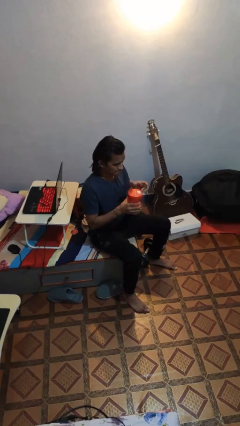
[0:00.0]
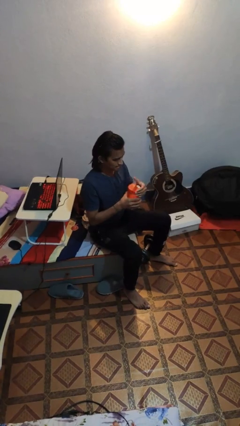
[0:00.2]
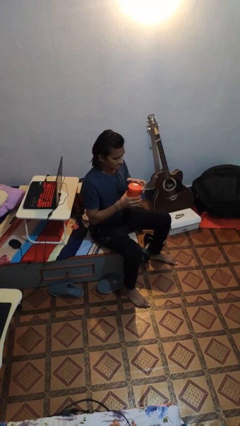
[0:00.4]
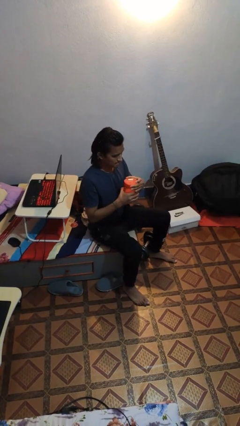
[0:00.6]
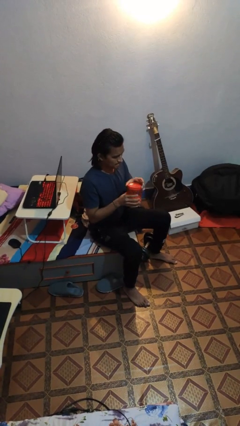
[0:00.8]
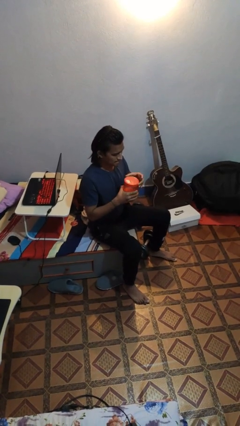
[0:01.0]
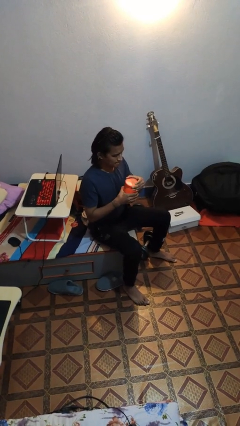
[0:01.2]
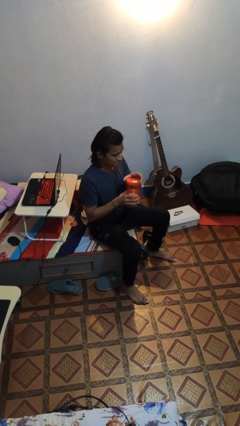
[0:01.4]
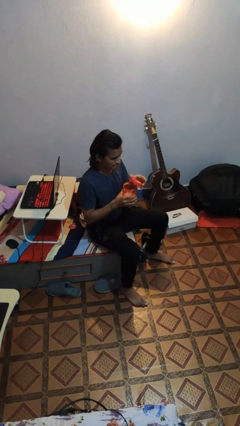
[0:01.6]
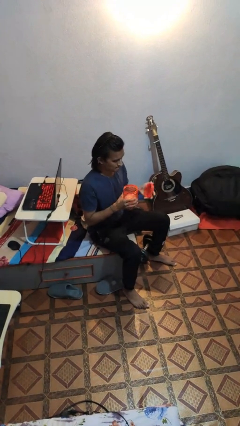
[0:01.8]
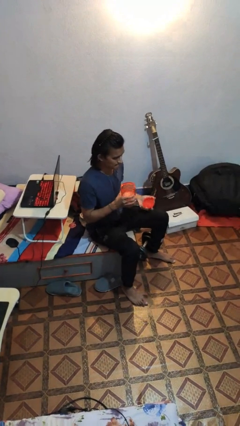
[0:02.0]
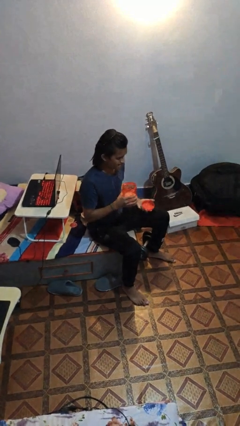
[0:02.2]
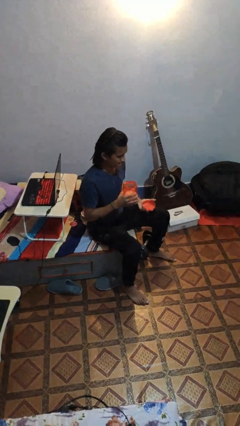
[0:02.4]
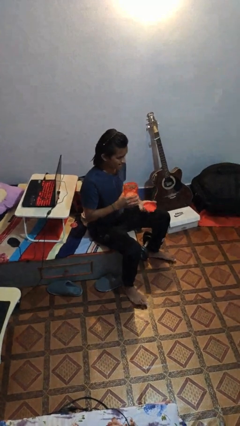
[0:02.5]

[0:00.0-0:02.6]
person opens jar

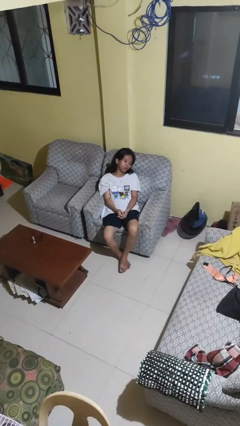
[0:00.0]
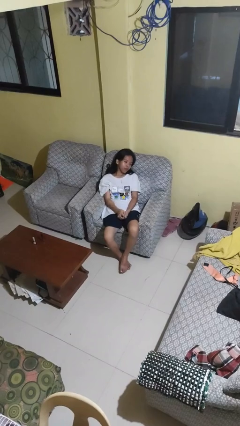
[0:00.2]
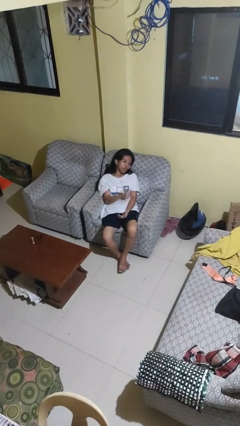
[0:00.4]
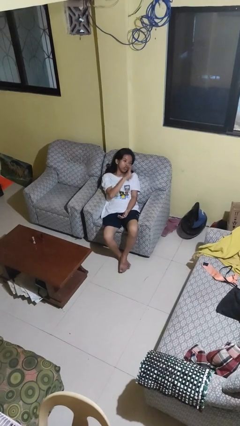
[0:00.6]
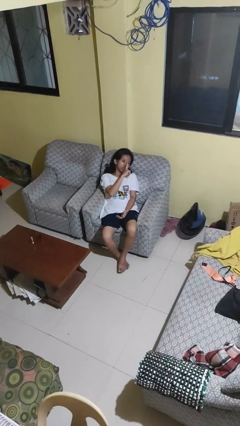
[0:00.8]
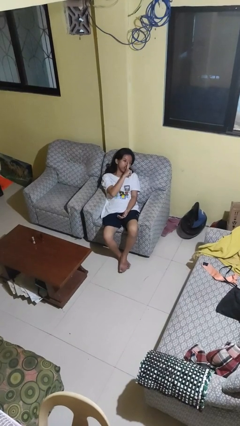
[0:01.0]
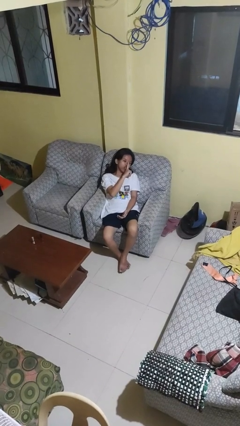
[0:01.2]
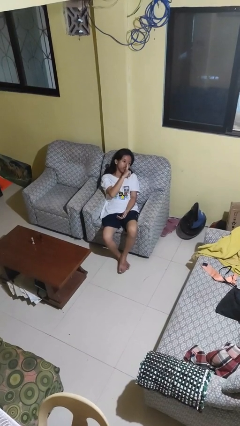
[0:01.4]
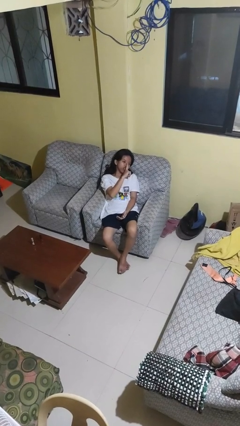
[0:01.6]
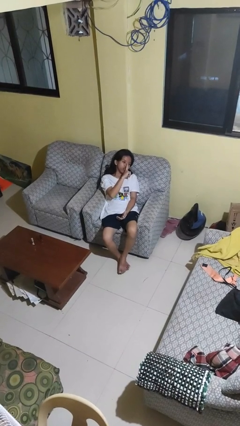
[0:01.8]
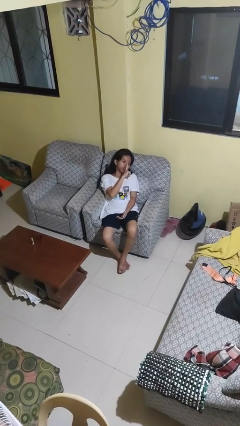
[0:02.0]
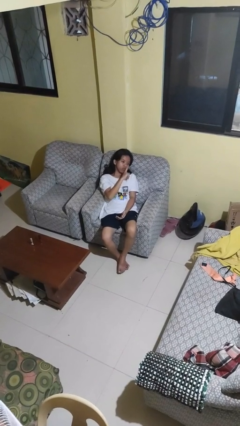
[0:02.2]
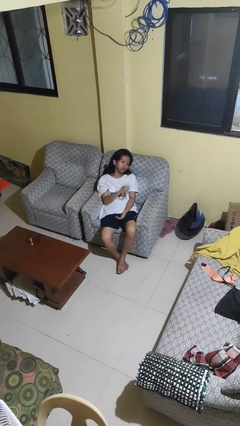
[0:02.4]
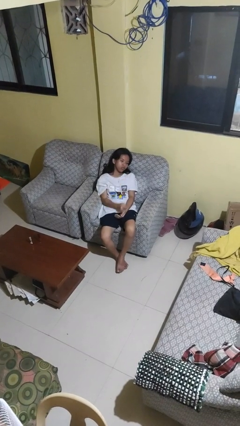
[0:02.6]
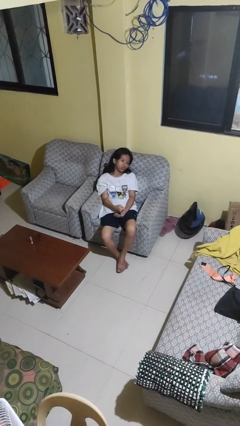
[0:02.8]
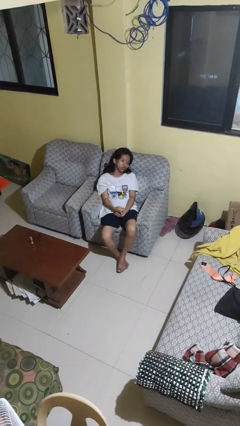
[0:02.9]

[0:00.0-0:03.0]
person gestures be quiet

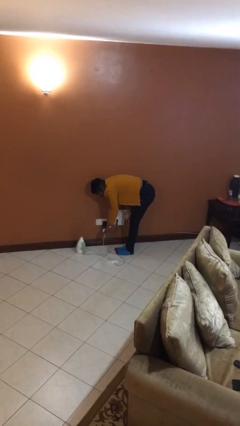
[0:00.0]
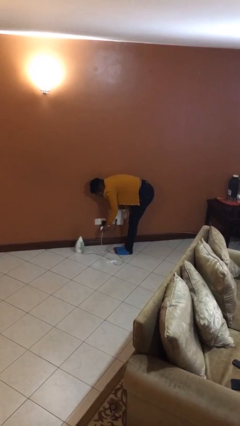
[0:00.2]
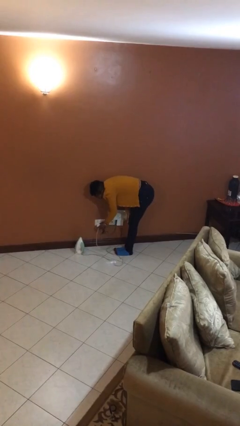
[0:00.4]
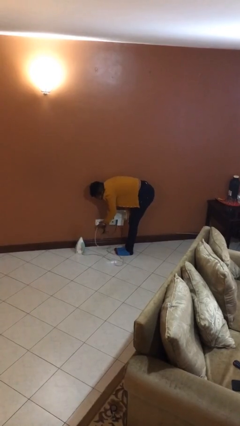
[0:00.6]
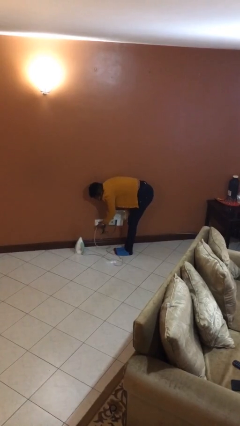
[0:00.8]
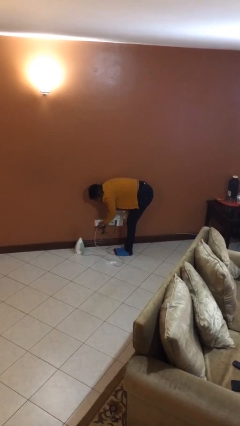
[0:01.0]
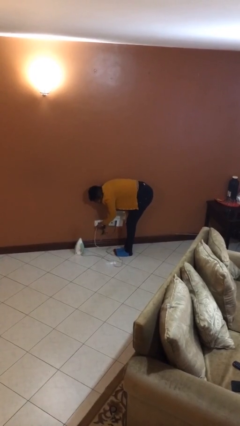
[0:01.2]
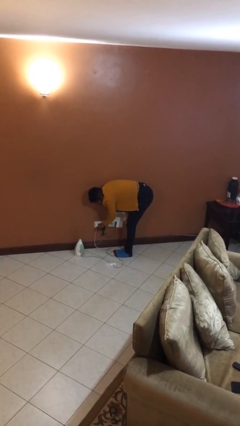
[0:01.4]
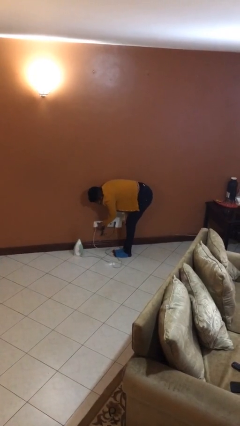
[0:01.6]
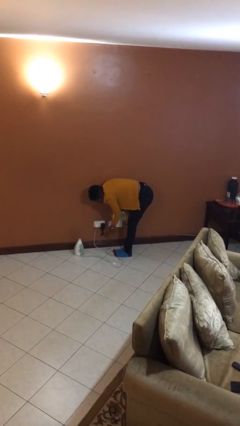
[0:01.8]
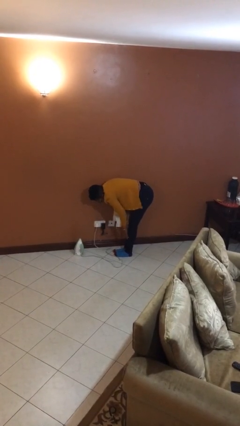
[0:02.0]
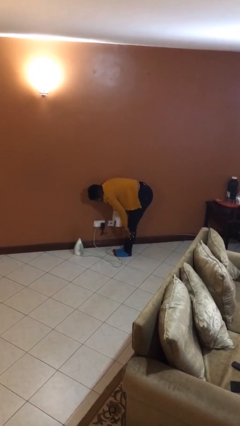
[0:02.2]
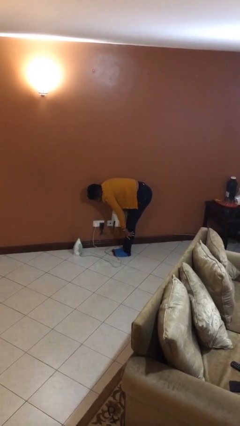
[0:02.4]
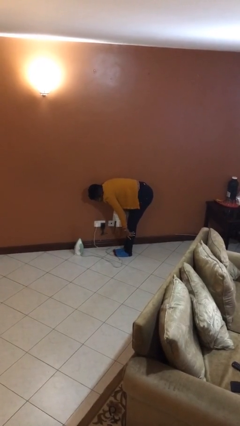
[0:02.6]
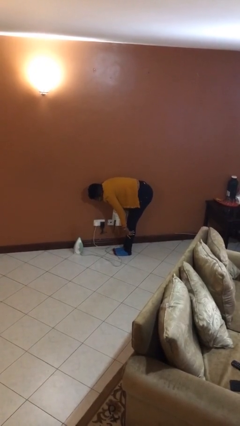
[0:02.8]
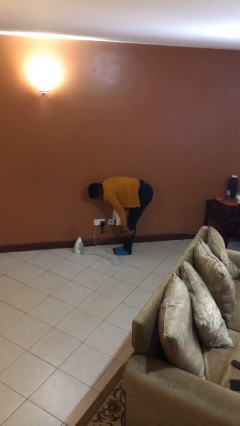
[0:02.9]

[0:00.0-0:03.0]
person plugs into electrical socket

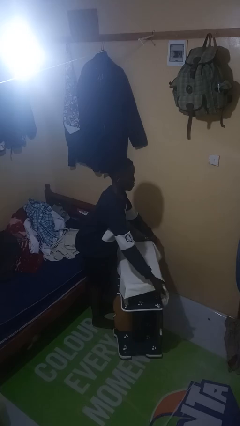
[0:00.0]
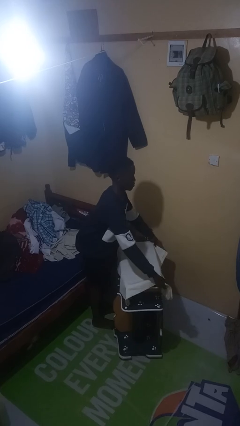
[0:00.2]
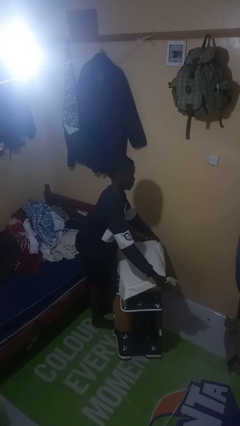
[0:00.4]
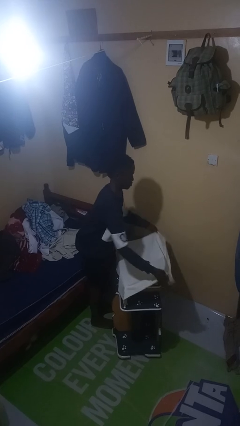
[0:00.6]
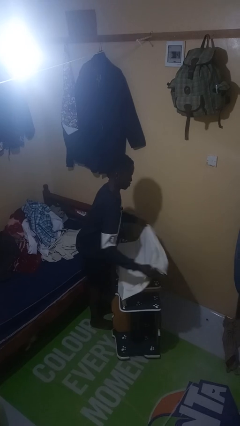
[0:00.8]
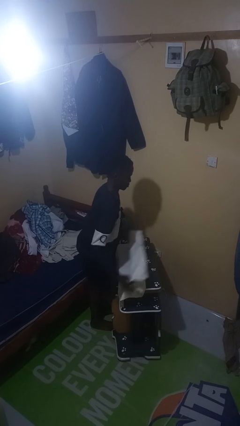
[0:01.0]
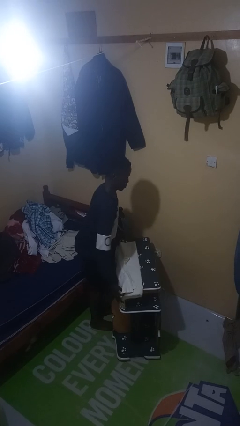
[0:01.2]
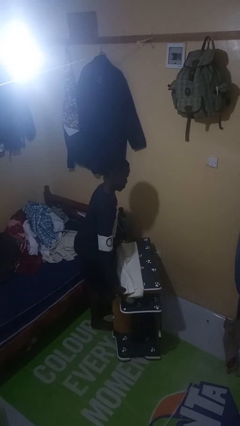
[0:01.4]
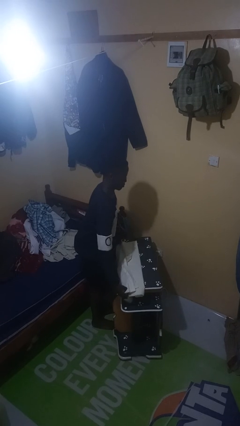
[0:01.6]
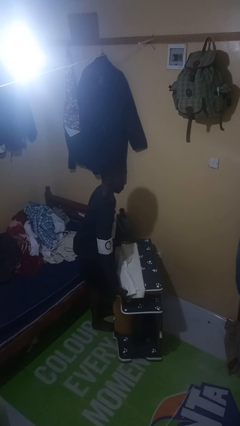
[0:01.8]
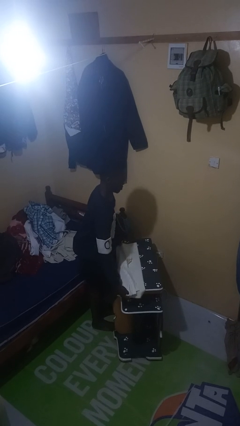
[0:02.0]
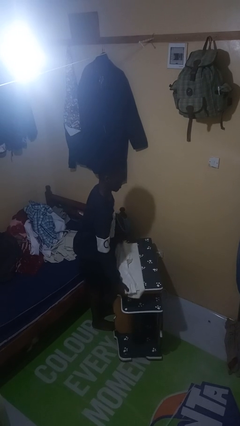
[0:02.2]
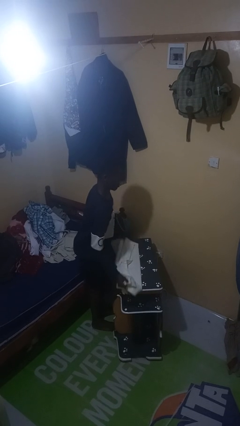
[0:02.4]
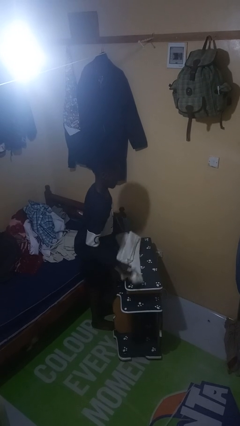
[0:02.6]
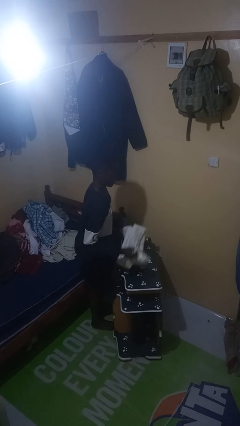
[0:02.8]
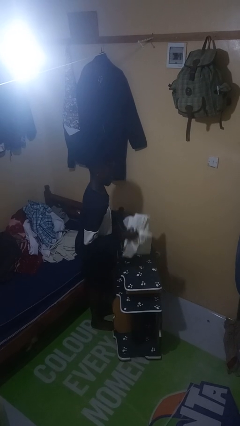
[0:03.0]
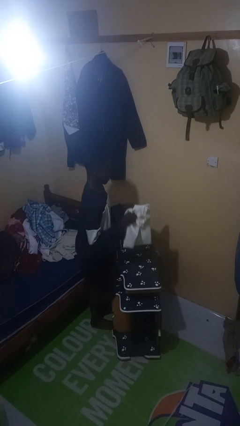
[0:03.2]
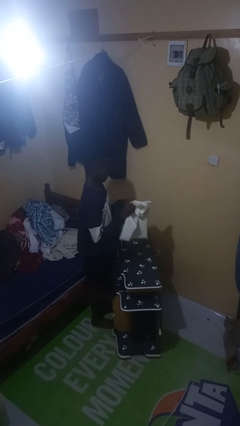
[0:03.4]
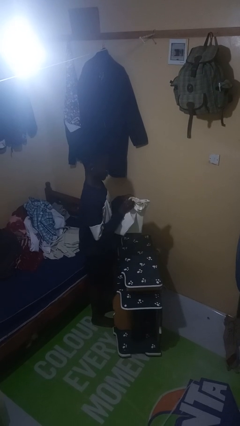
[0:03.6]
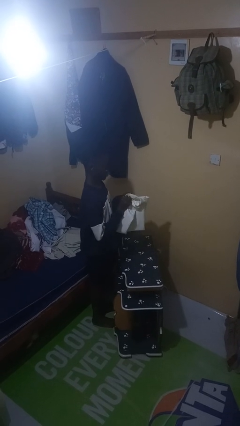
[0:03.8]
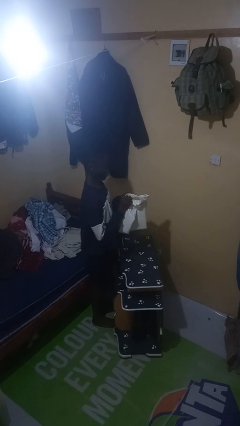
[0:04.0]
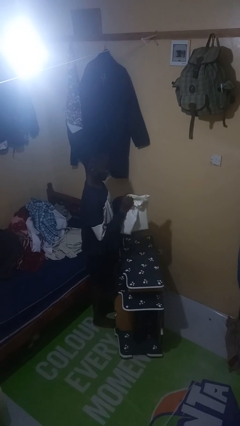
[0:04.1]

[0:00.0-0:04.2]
person folds tablecloth

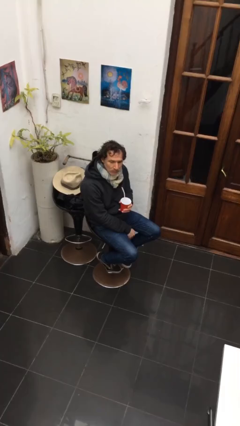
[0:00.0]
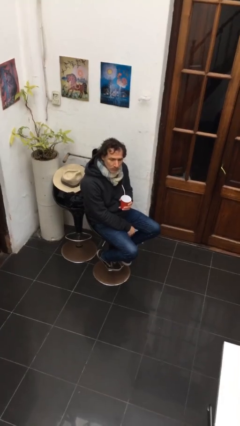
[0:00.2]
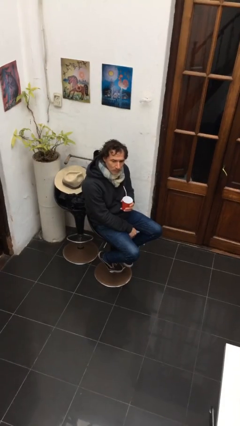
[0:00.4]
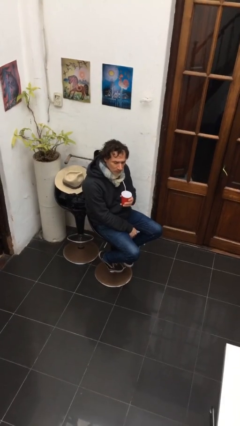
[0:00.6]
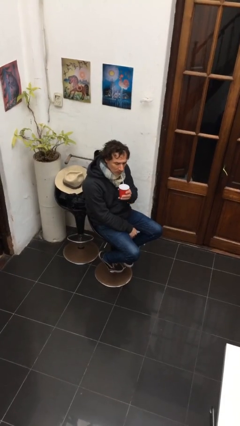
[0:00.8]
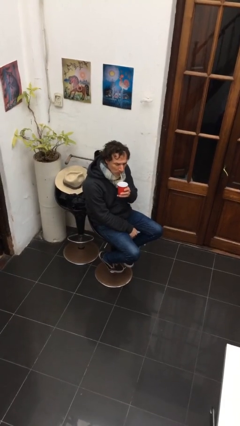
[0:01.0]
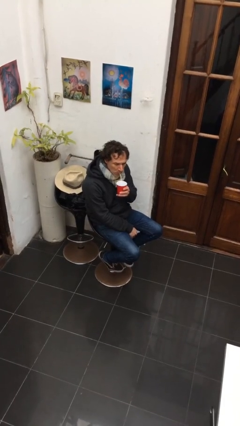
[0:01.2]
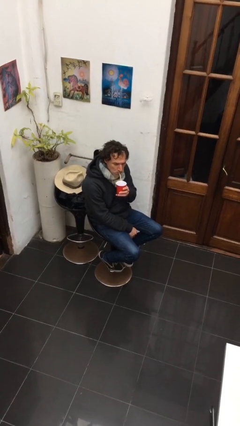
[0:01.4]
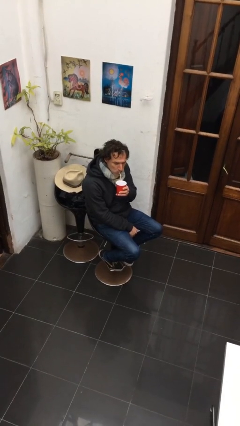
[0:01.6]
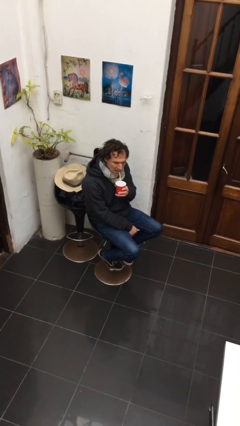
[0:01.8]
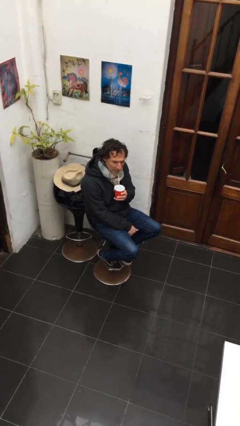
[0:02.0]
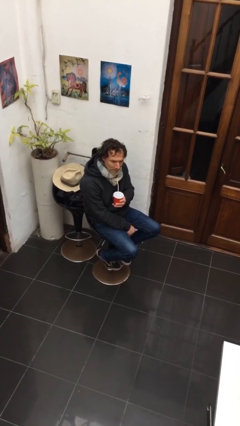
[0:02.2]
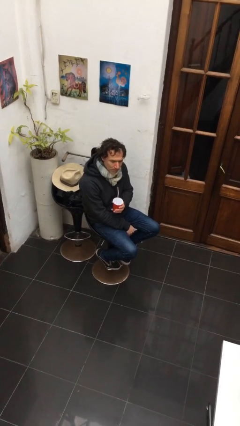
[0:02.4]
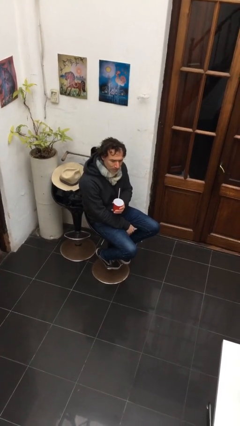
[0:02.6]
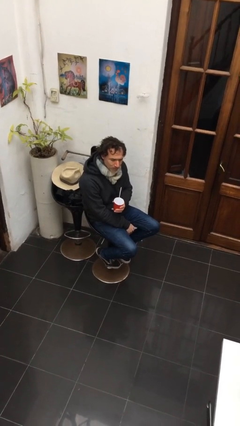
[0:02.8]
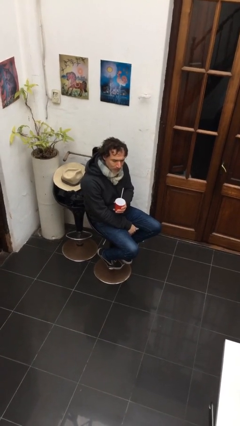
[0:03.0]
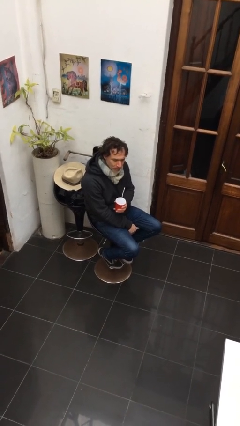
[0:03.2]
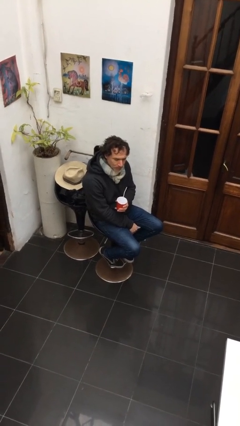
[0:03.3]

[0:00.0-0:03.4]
person drinks from straw

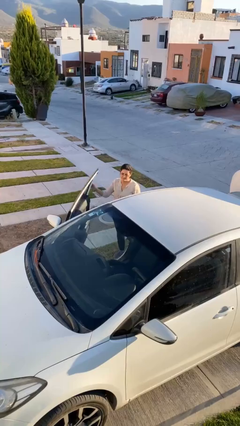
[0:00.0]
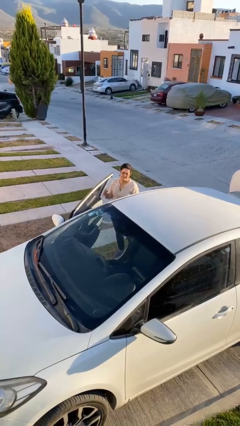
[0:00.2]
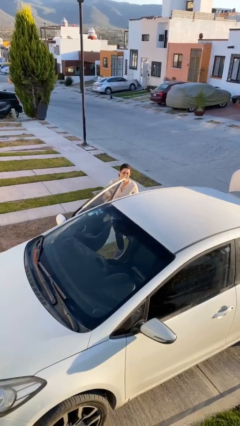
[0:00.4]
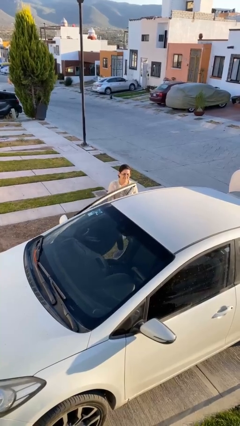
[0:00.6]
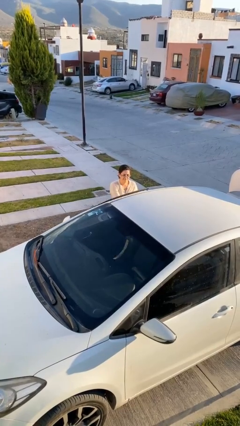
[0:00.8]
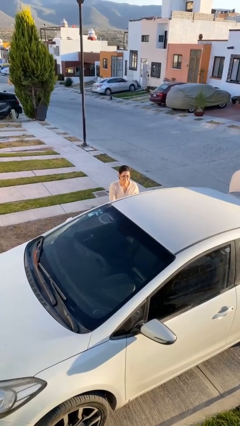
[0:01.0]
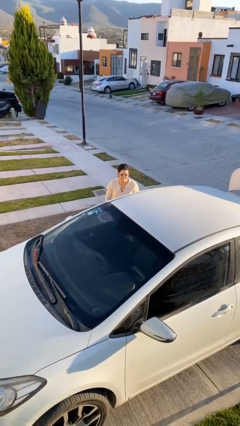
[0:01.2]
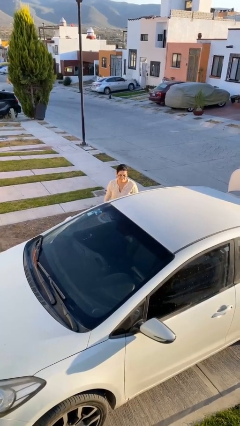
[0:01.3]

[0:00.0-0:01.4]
person closes car door
